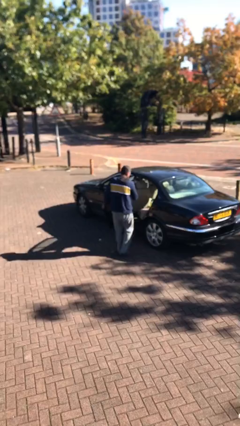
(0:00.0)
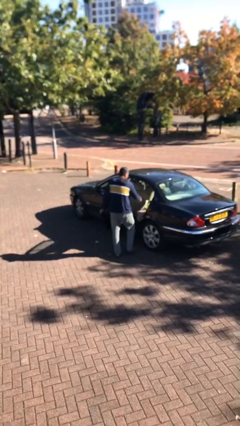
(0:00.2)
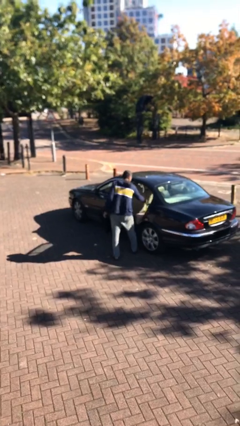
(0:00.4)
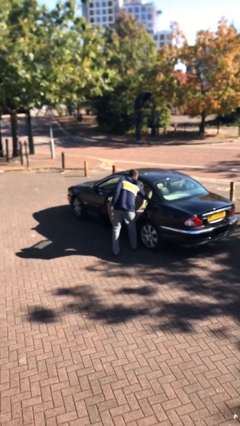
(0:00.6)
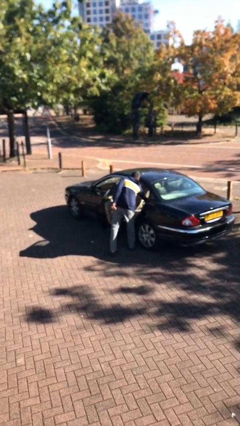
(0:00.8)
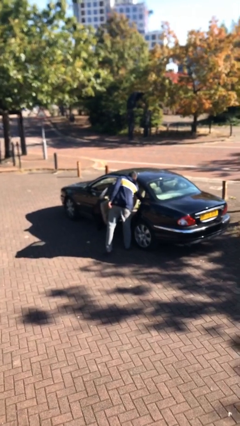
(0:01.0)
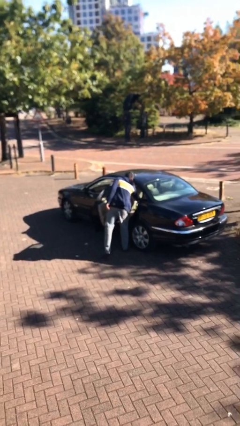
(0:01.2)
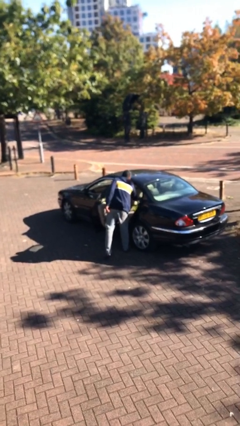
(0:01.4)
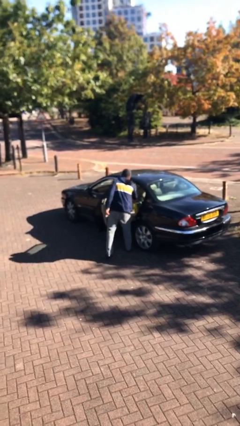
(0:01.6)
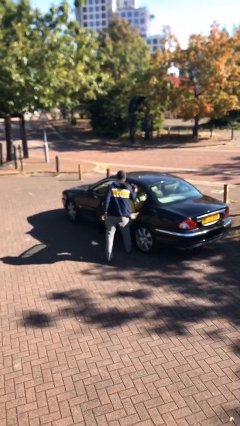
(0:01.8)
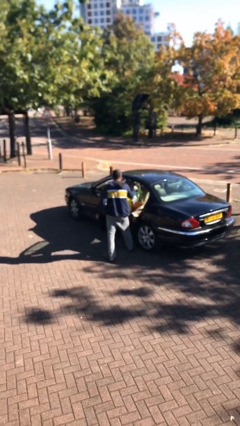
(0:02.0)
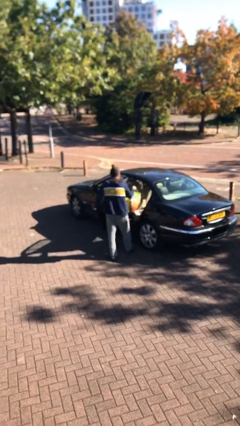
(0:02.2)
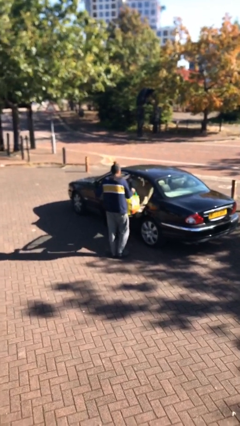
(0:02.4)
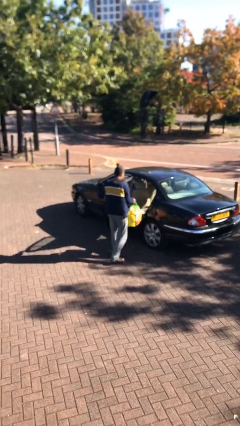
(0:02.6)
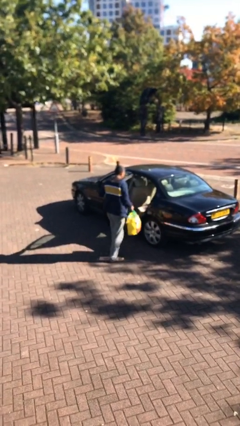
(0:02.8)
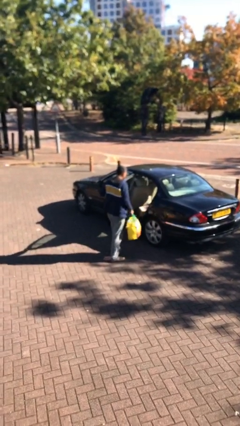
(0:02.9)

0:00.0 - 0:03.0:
person unloads car

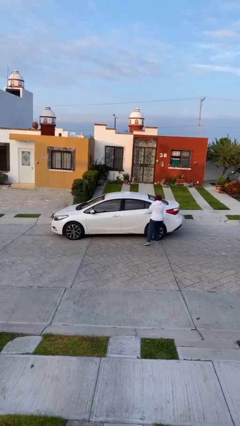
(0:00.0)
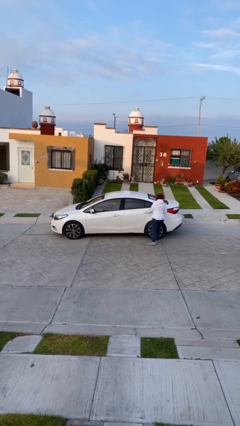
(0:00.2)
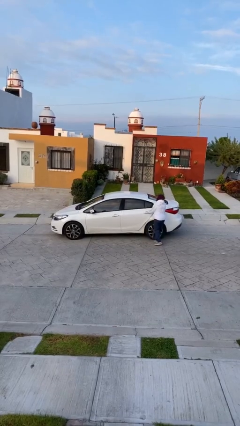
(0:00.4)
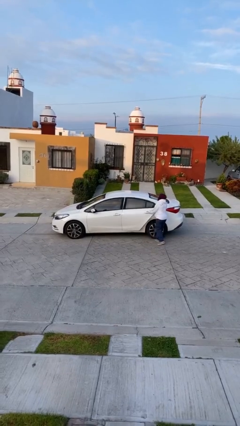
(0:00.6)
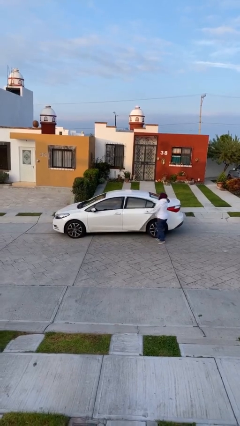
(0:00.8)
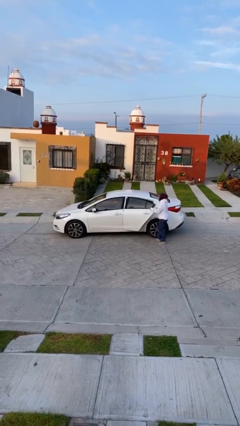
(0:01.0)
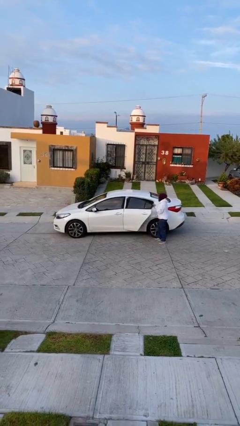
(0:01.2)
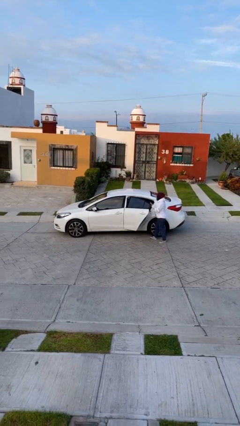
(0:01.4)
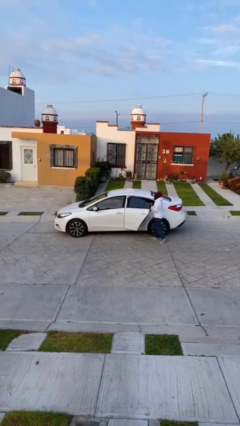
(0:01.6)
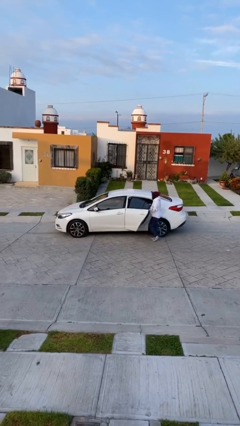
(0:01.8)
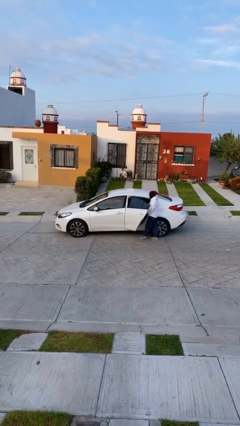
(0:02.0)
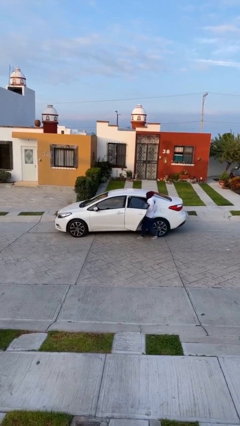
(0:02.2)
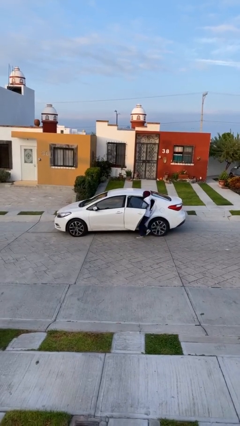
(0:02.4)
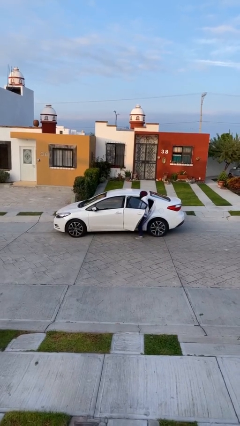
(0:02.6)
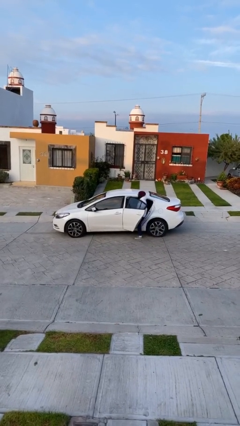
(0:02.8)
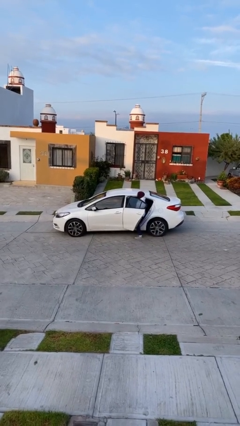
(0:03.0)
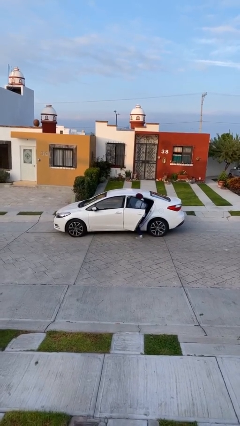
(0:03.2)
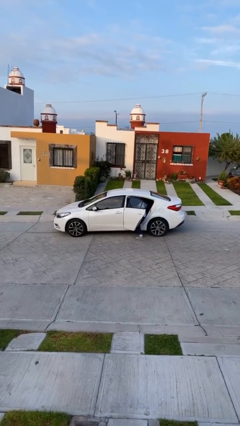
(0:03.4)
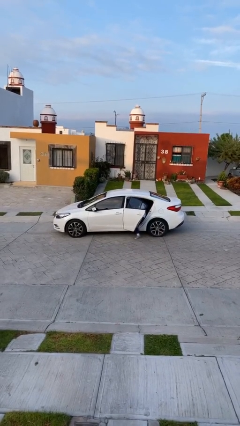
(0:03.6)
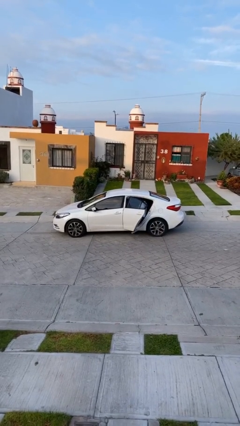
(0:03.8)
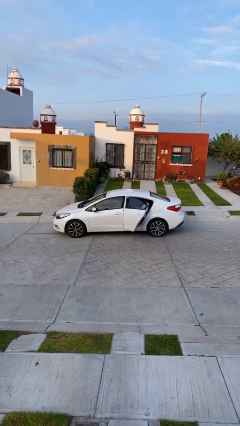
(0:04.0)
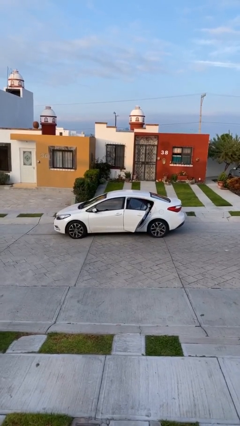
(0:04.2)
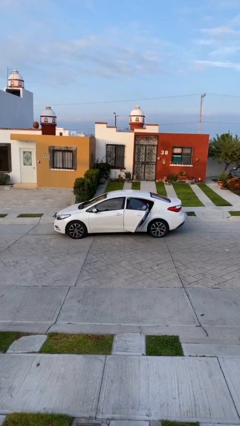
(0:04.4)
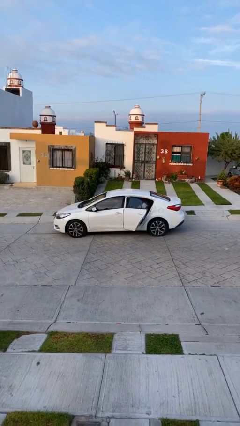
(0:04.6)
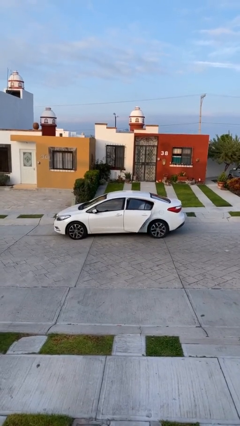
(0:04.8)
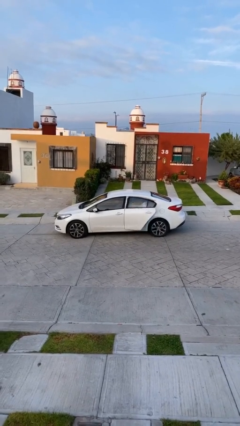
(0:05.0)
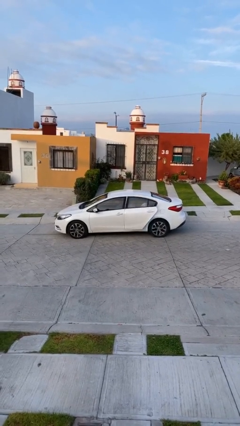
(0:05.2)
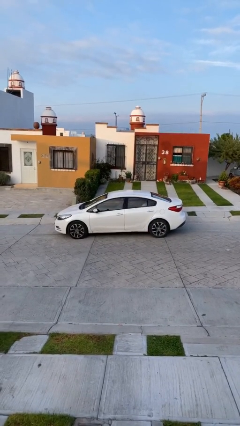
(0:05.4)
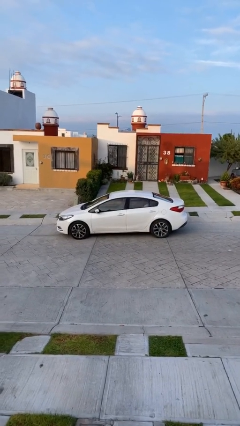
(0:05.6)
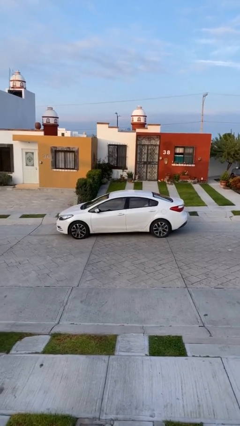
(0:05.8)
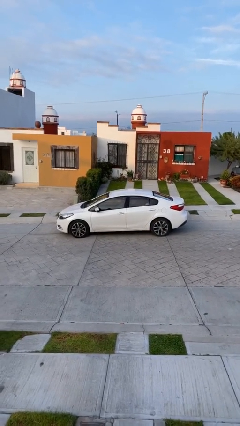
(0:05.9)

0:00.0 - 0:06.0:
car picks up person

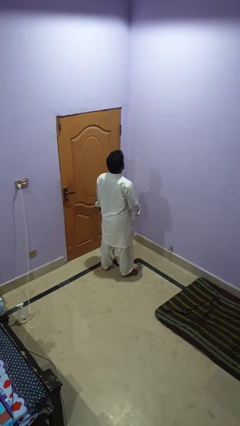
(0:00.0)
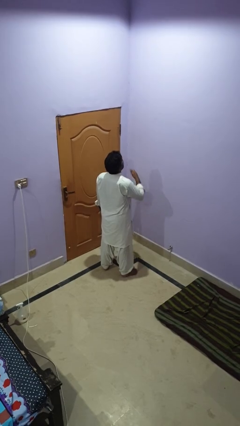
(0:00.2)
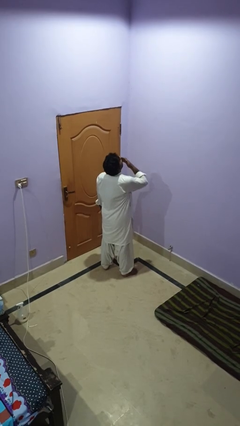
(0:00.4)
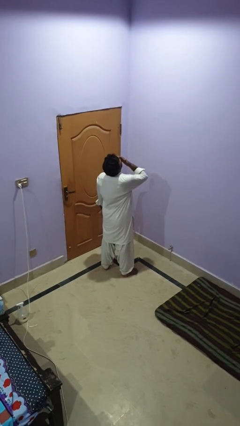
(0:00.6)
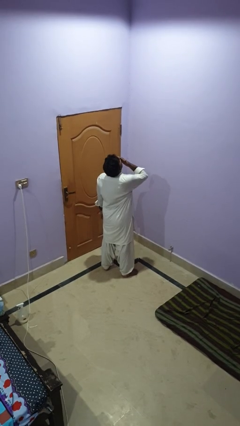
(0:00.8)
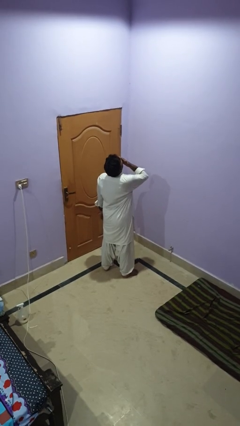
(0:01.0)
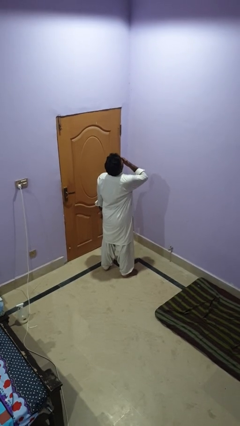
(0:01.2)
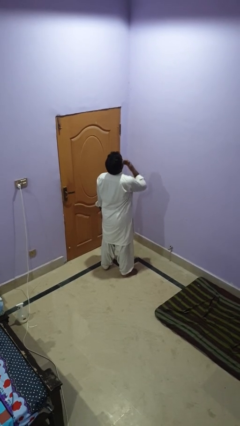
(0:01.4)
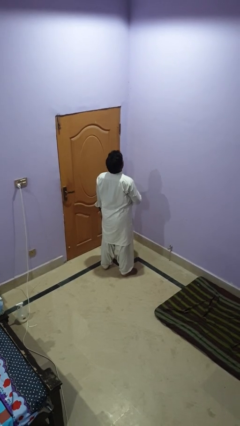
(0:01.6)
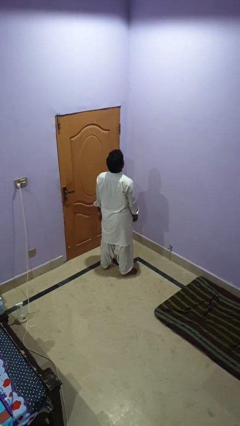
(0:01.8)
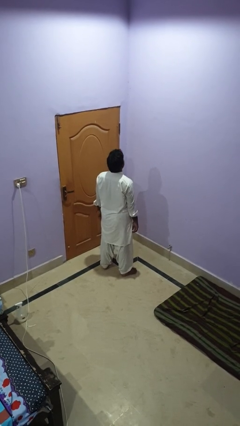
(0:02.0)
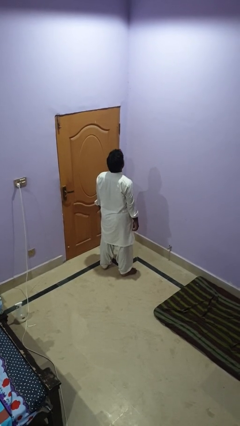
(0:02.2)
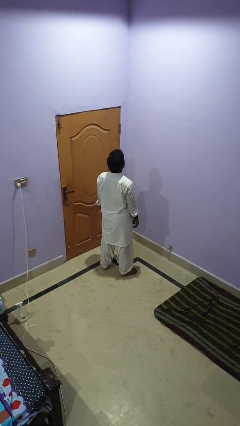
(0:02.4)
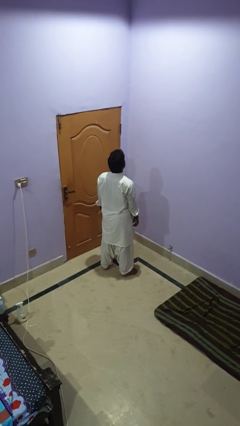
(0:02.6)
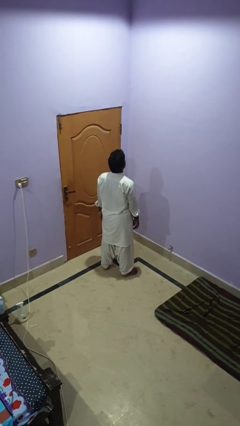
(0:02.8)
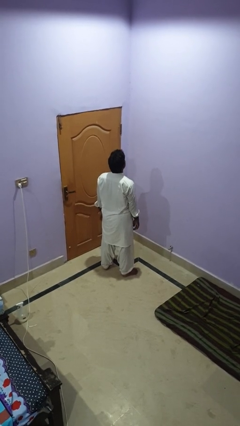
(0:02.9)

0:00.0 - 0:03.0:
person yawns

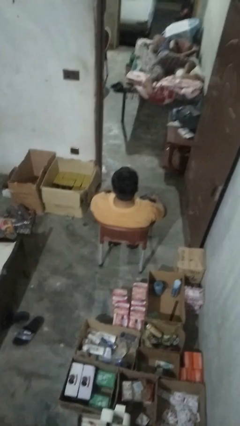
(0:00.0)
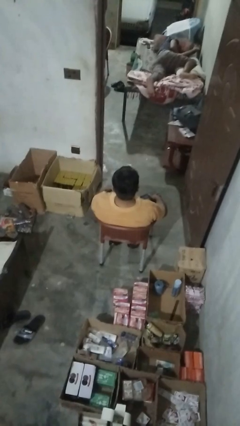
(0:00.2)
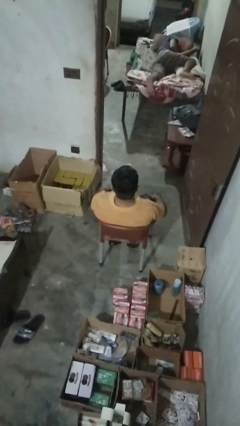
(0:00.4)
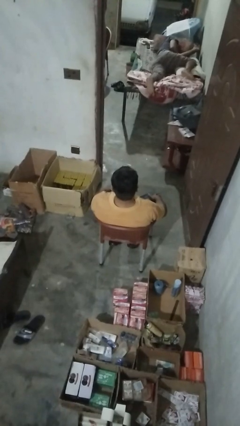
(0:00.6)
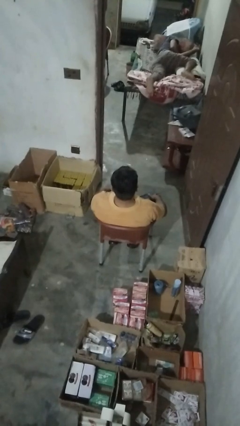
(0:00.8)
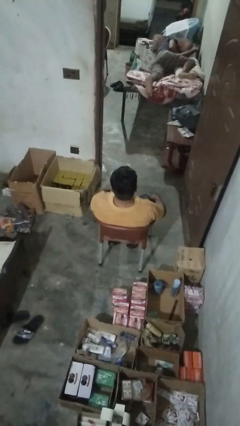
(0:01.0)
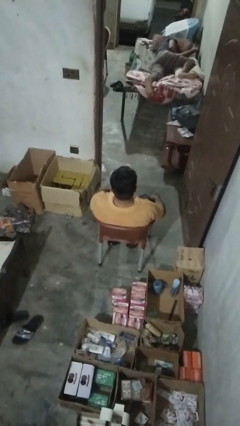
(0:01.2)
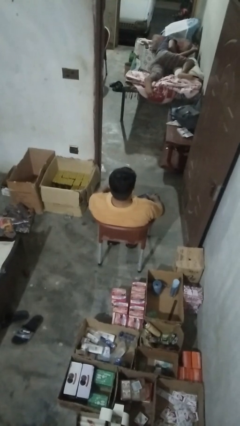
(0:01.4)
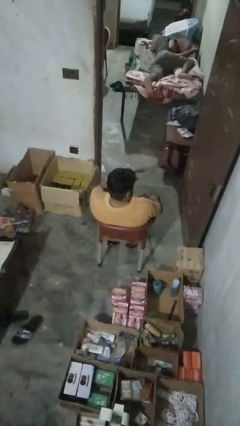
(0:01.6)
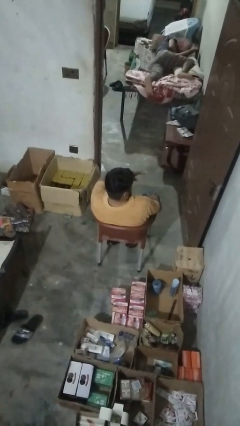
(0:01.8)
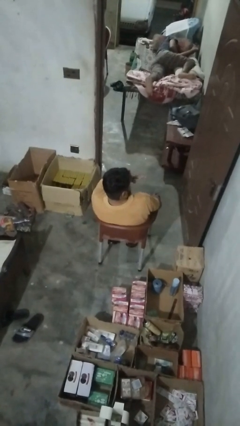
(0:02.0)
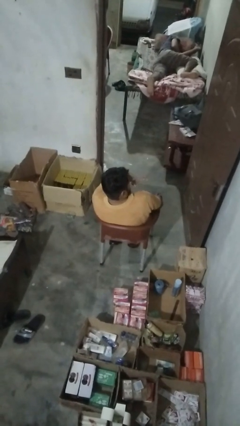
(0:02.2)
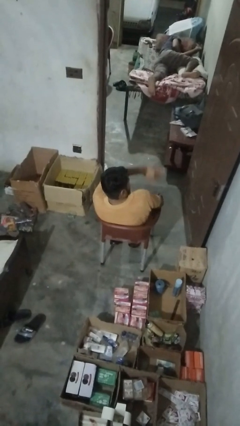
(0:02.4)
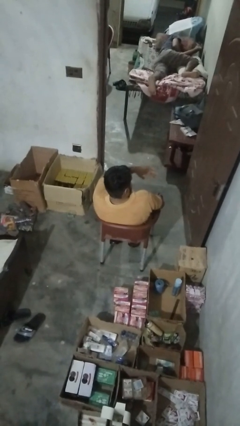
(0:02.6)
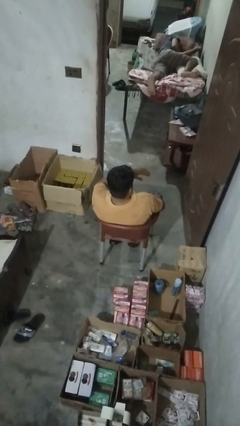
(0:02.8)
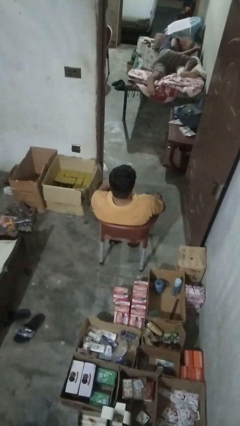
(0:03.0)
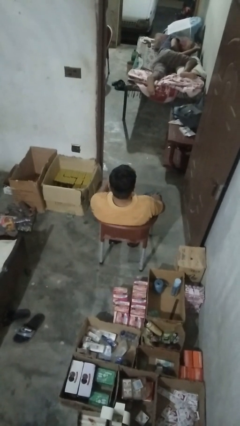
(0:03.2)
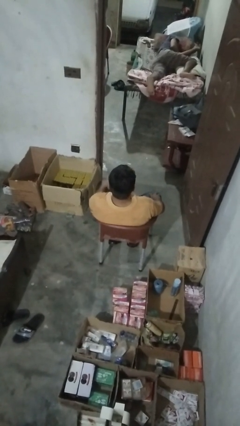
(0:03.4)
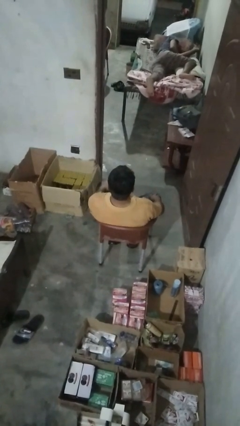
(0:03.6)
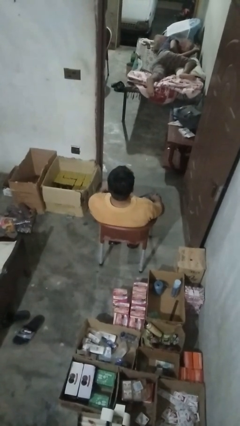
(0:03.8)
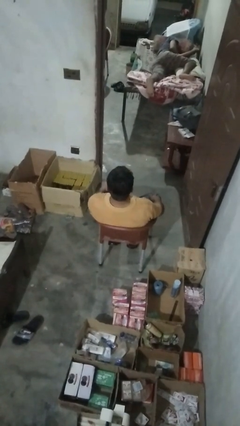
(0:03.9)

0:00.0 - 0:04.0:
person swats bug

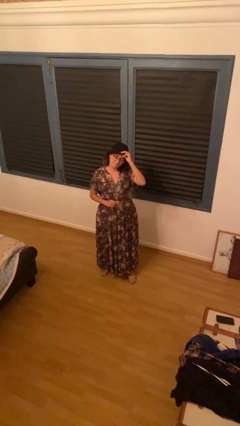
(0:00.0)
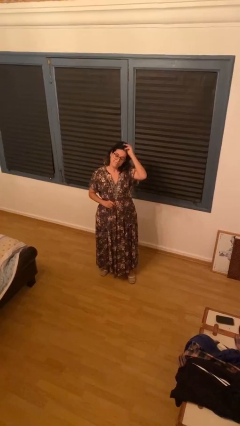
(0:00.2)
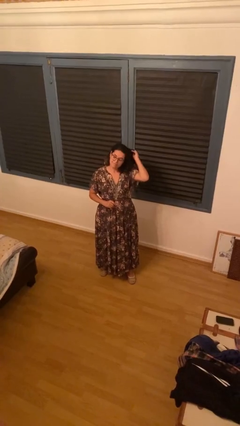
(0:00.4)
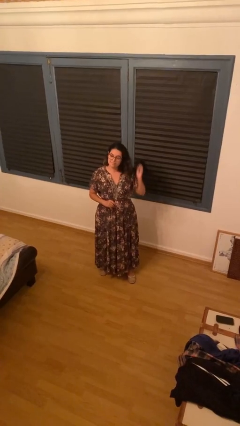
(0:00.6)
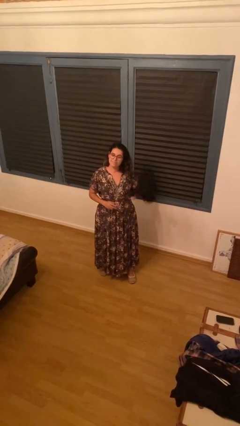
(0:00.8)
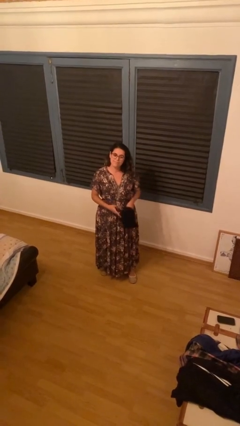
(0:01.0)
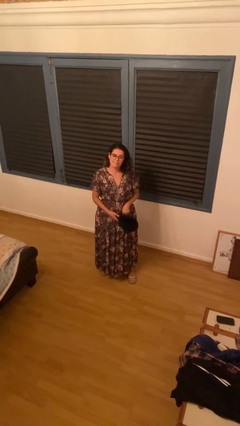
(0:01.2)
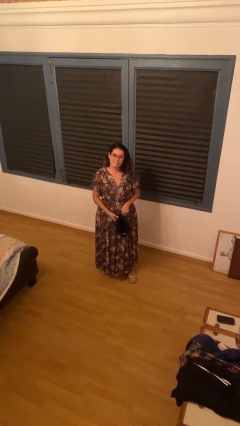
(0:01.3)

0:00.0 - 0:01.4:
person takes off hat

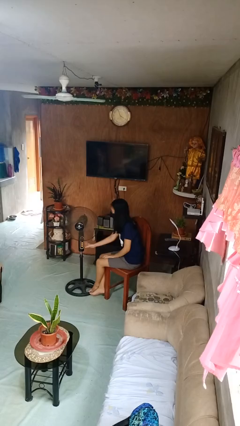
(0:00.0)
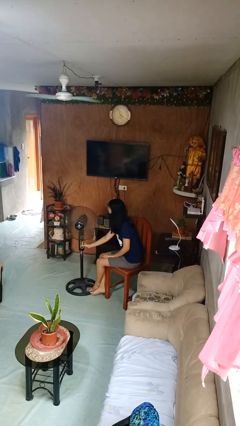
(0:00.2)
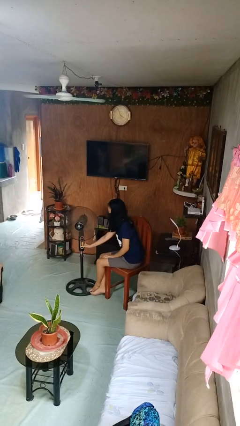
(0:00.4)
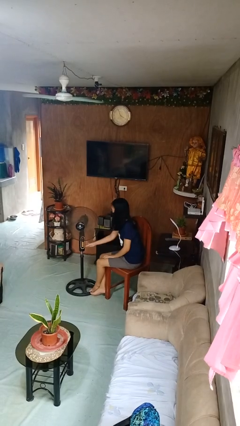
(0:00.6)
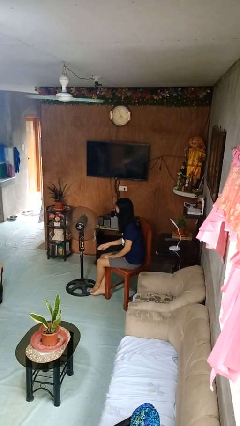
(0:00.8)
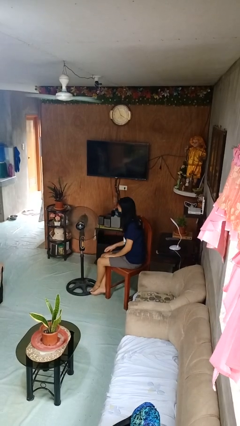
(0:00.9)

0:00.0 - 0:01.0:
person turns off fan
